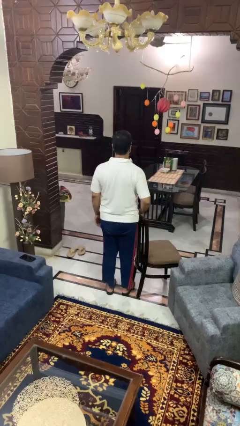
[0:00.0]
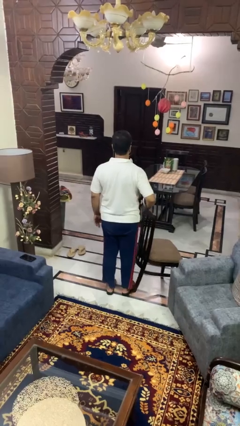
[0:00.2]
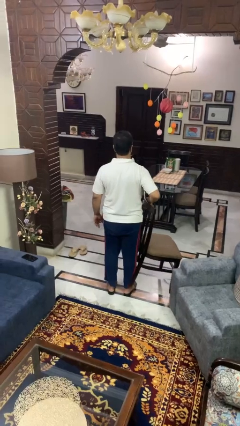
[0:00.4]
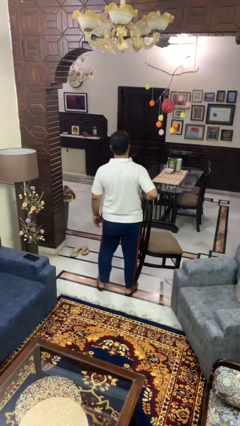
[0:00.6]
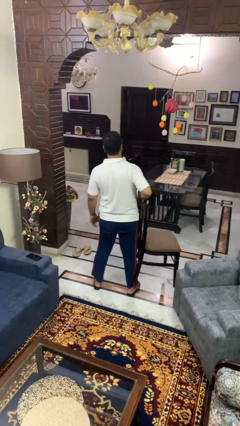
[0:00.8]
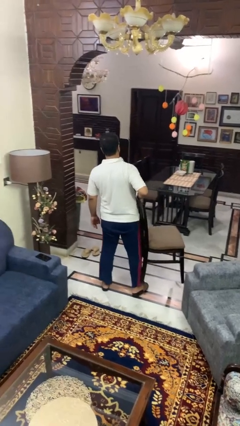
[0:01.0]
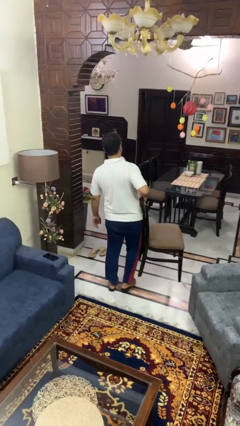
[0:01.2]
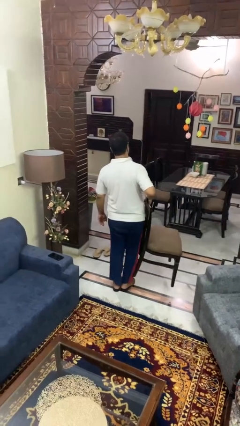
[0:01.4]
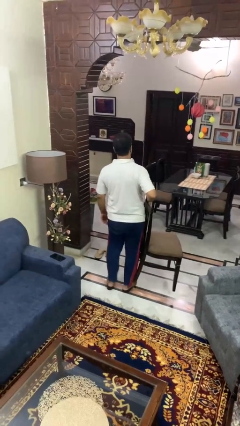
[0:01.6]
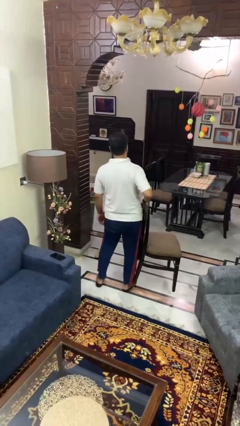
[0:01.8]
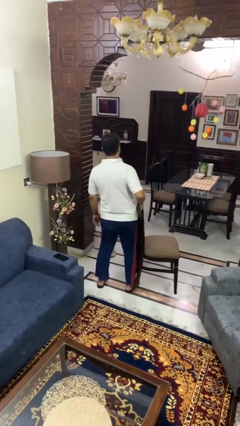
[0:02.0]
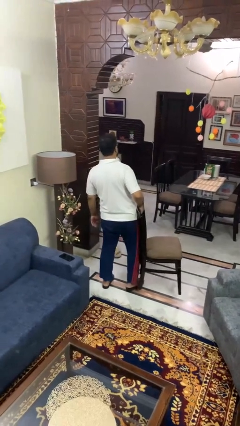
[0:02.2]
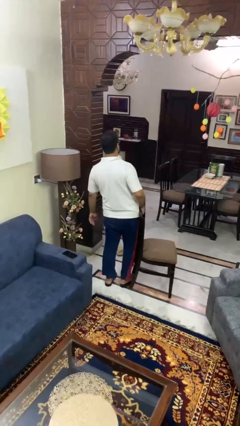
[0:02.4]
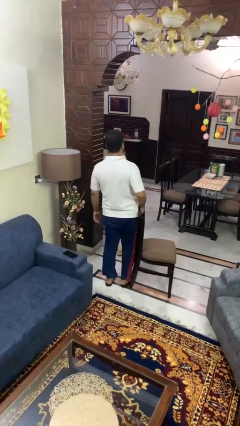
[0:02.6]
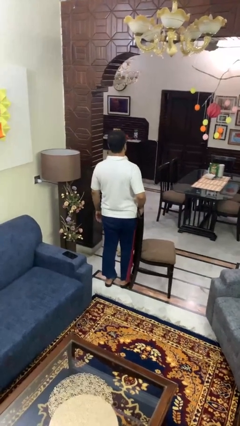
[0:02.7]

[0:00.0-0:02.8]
person carries furniture

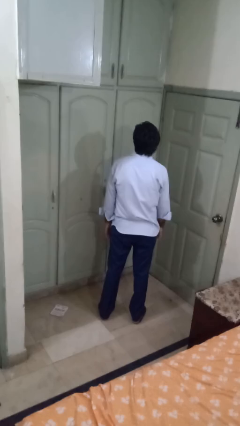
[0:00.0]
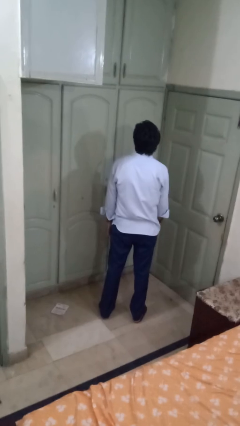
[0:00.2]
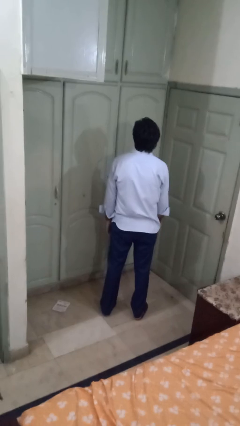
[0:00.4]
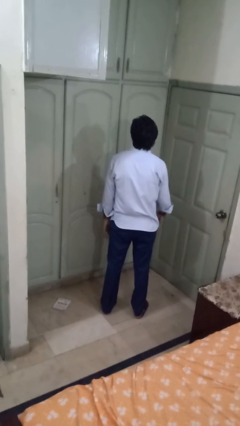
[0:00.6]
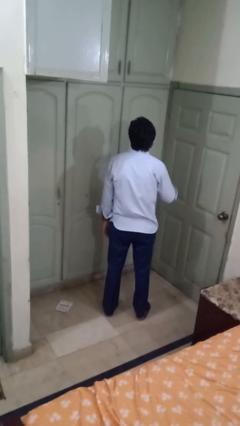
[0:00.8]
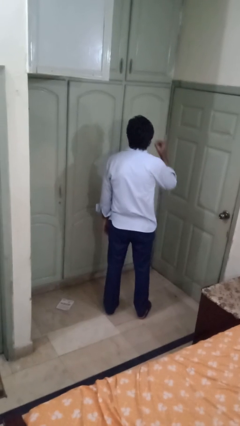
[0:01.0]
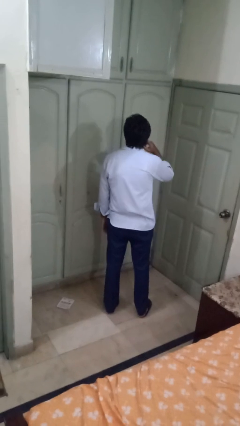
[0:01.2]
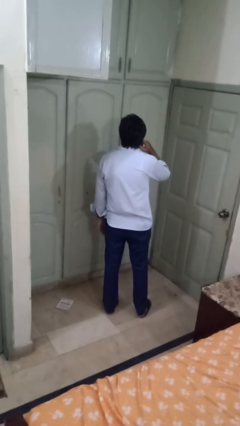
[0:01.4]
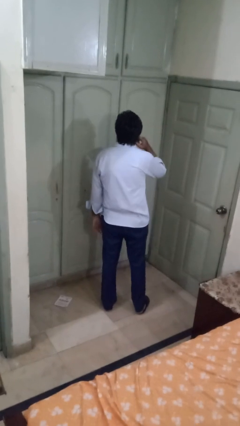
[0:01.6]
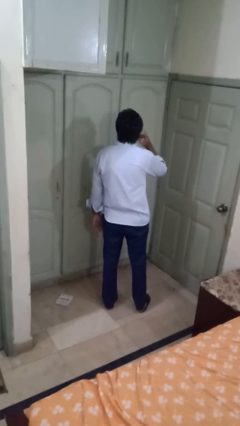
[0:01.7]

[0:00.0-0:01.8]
person gestures listen closely

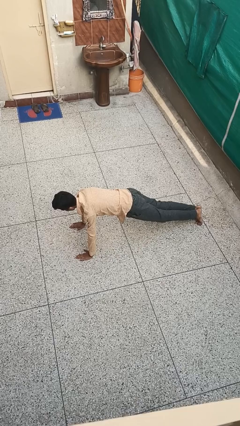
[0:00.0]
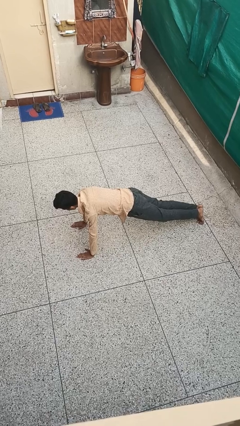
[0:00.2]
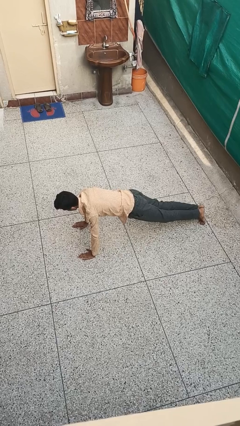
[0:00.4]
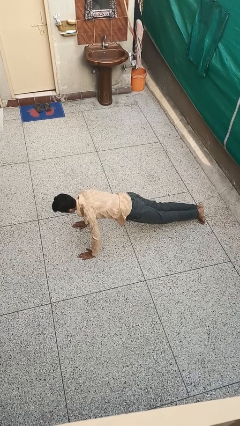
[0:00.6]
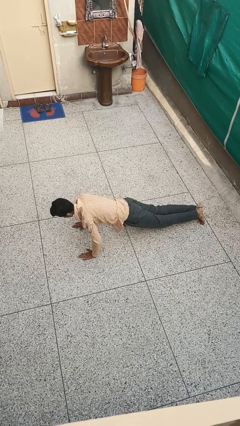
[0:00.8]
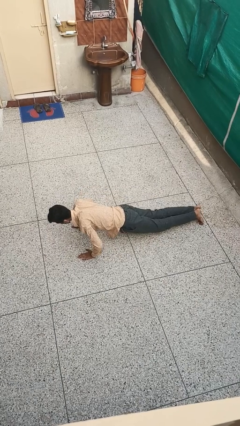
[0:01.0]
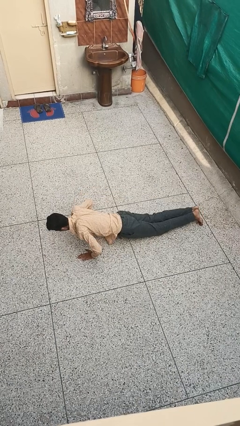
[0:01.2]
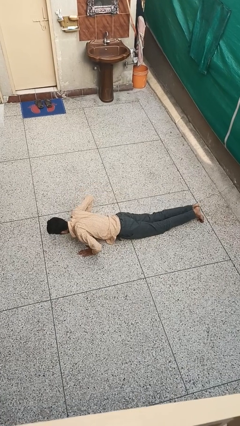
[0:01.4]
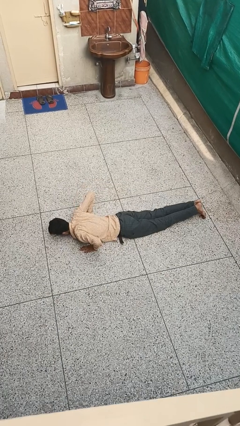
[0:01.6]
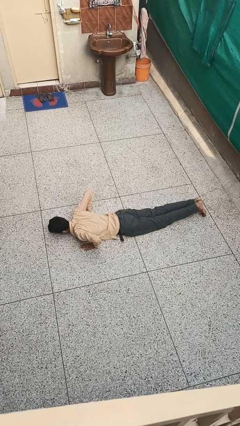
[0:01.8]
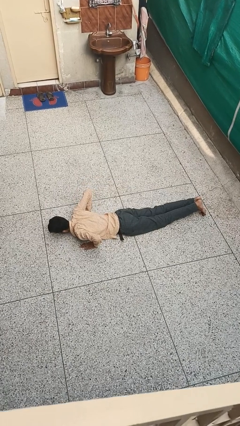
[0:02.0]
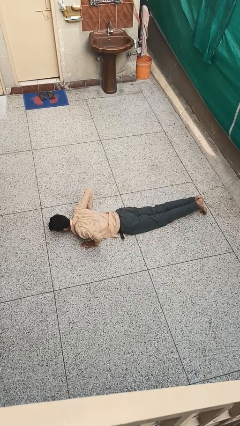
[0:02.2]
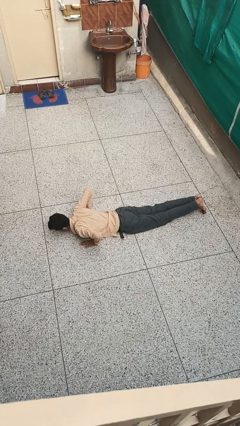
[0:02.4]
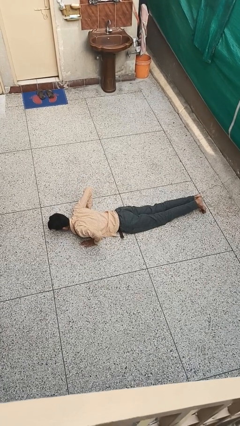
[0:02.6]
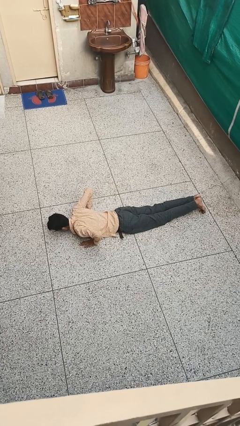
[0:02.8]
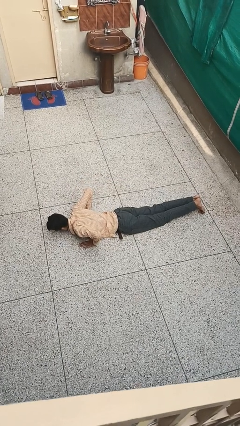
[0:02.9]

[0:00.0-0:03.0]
person exercises with pushup

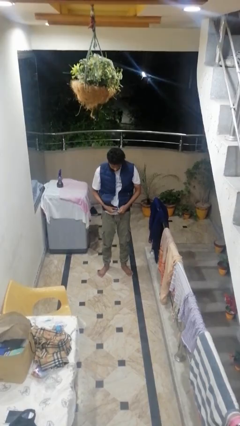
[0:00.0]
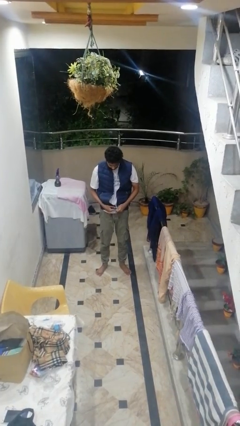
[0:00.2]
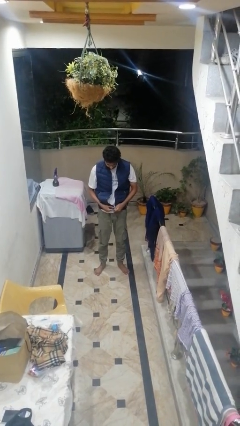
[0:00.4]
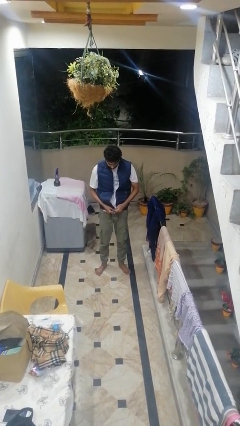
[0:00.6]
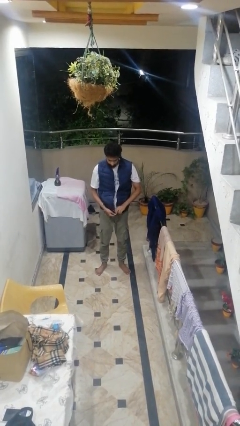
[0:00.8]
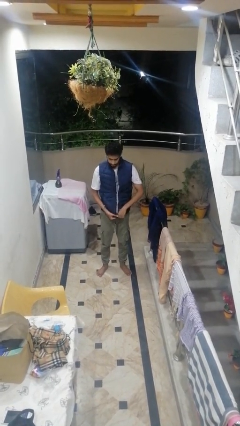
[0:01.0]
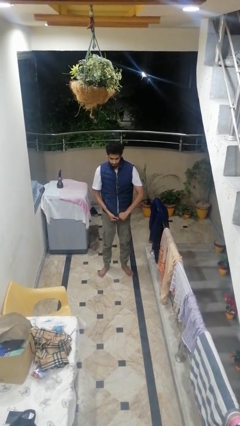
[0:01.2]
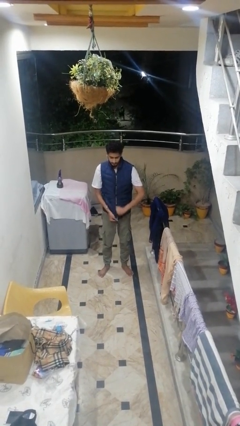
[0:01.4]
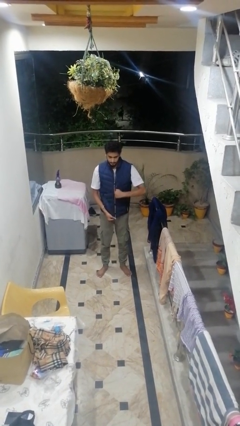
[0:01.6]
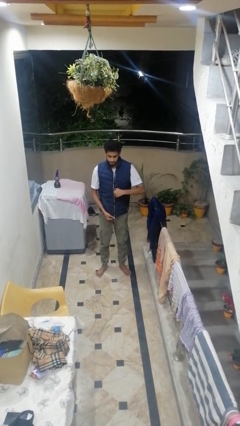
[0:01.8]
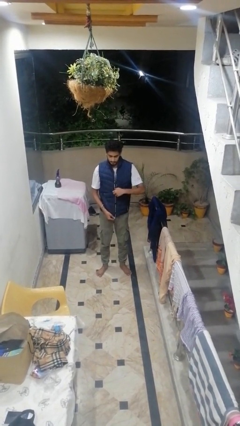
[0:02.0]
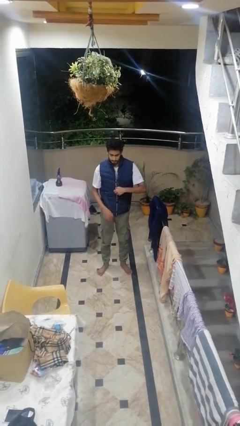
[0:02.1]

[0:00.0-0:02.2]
person zips up jacket

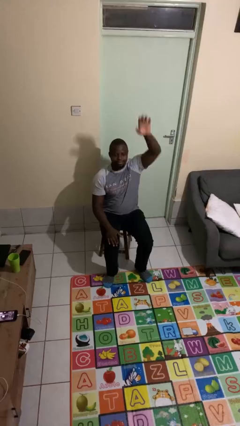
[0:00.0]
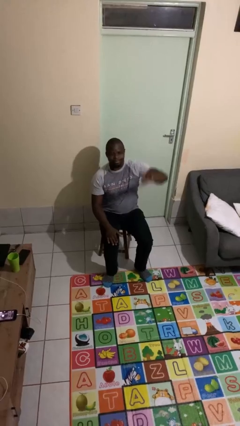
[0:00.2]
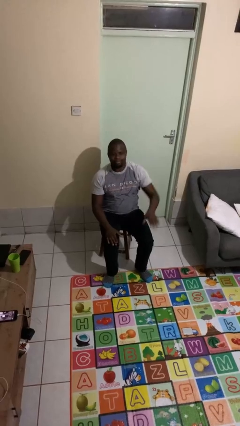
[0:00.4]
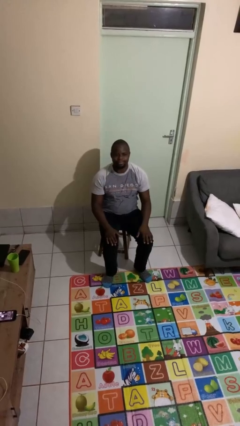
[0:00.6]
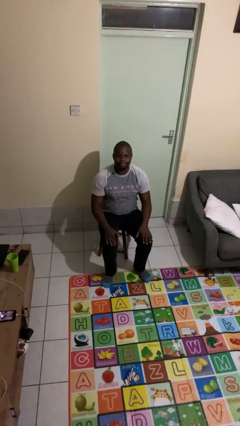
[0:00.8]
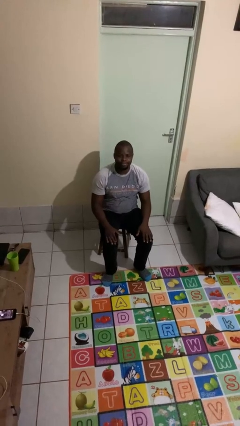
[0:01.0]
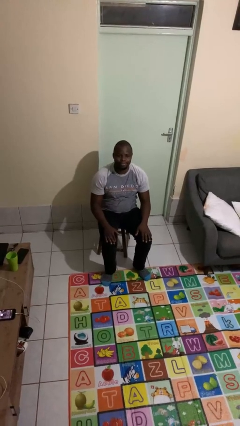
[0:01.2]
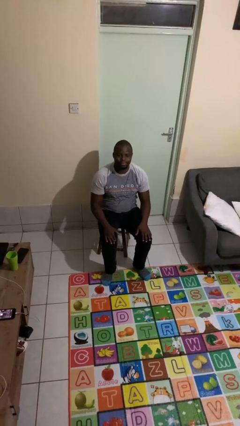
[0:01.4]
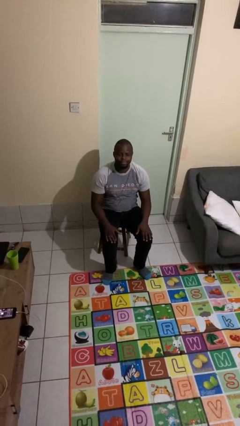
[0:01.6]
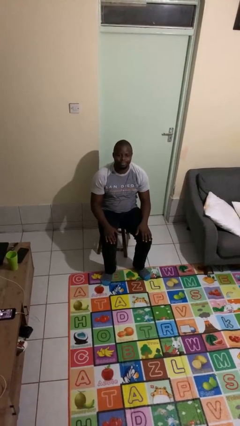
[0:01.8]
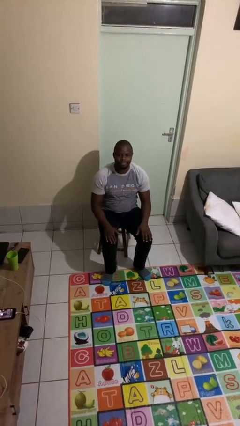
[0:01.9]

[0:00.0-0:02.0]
person gestures lower hand

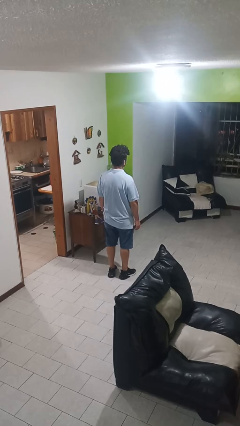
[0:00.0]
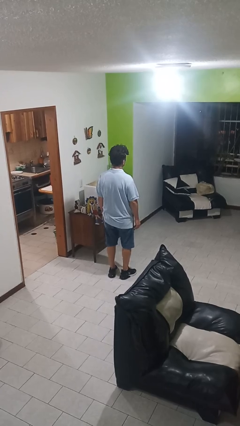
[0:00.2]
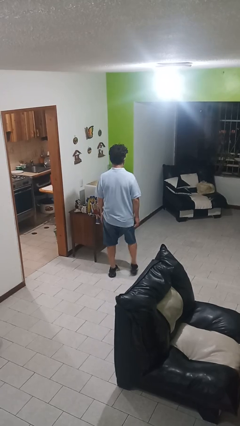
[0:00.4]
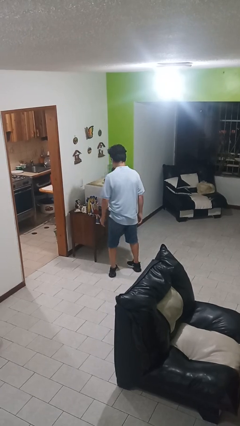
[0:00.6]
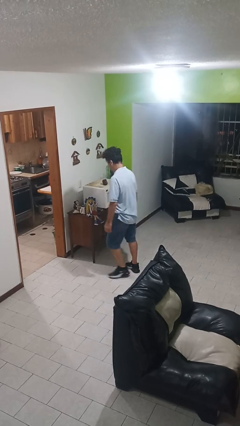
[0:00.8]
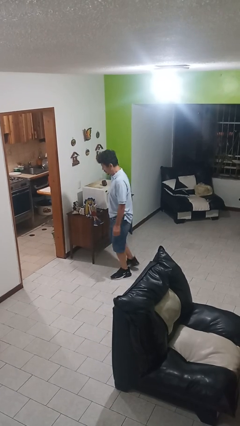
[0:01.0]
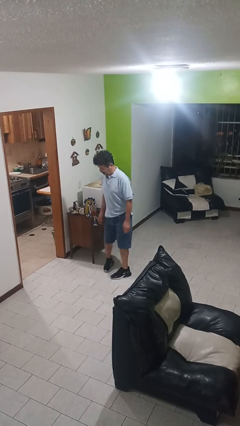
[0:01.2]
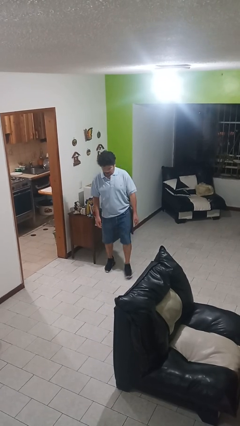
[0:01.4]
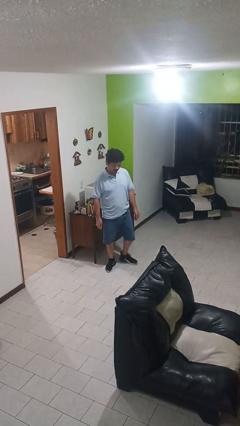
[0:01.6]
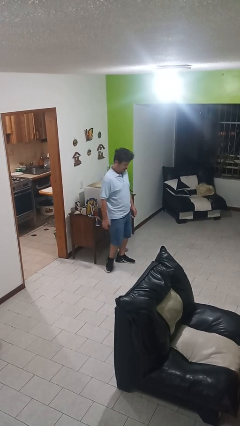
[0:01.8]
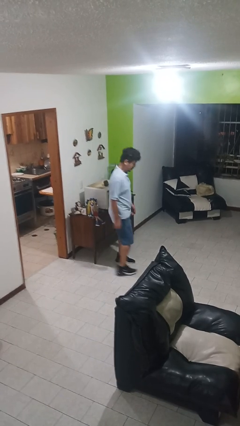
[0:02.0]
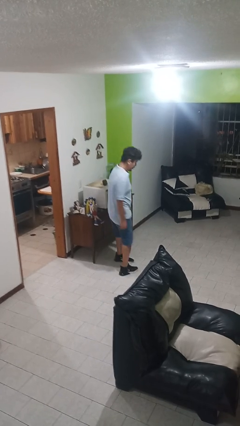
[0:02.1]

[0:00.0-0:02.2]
person twirls

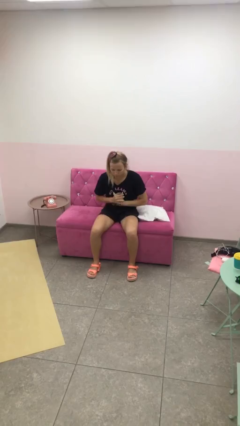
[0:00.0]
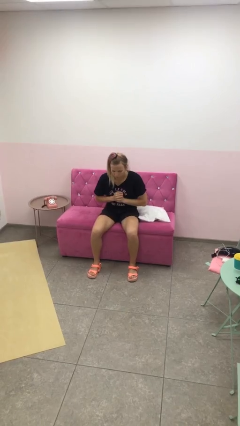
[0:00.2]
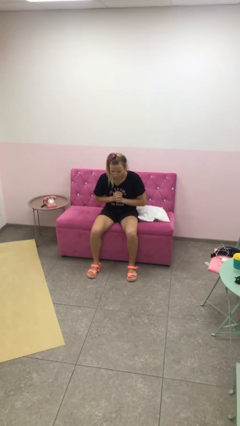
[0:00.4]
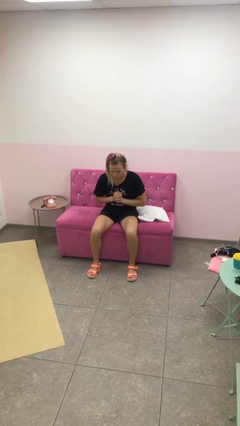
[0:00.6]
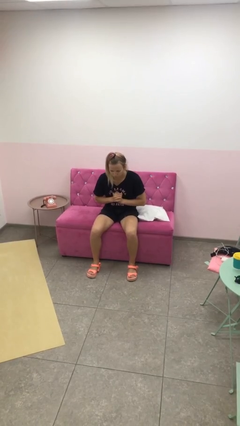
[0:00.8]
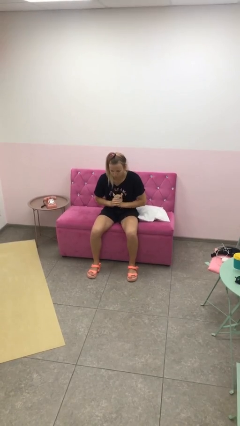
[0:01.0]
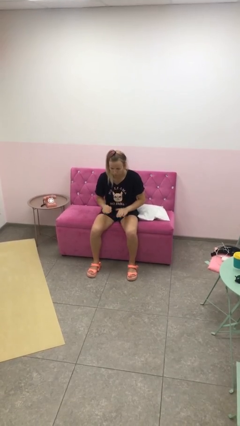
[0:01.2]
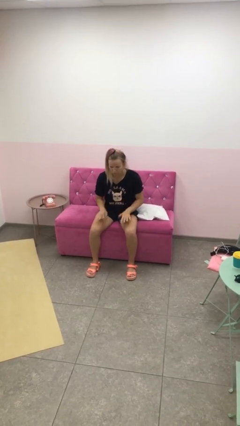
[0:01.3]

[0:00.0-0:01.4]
person looks at hands in lap

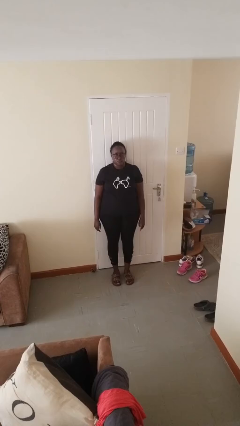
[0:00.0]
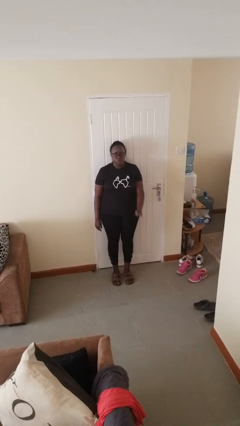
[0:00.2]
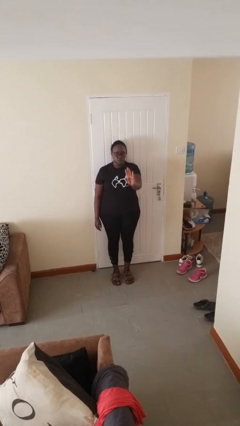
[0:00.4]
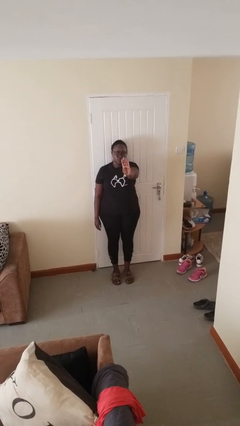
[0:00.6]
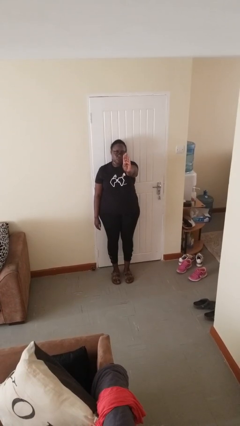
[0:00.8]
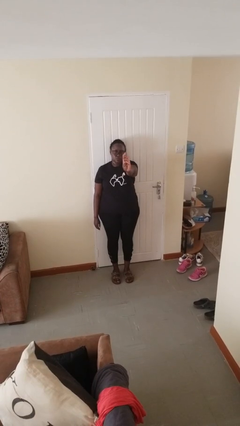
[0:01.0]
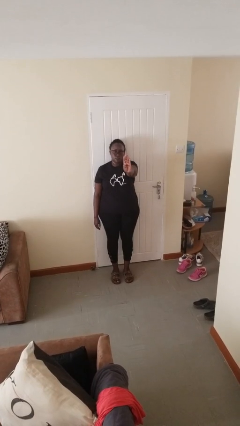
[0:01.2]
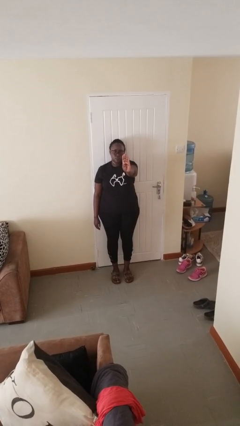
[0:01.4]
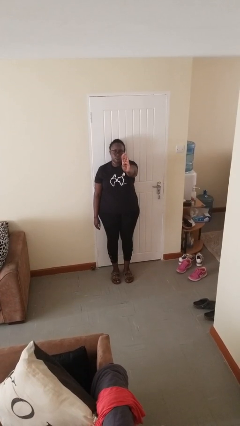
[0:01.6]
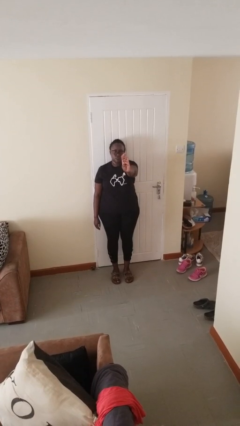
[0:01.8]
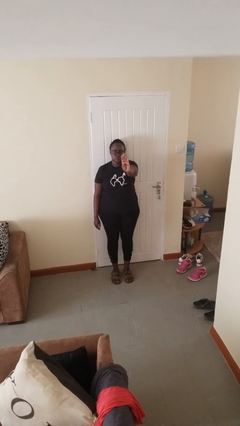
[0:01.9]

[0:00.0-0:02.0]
person gestures number four
